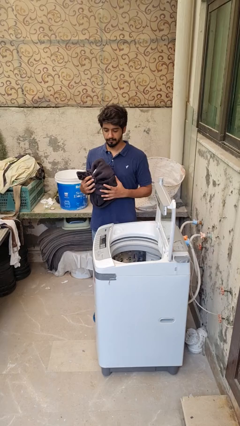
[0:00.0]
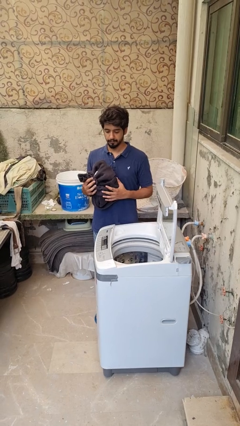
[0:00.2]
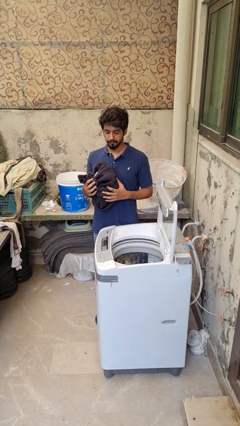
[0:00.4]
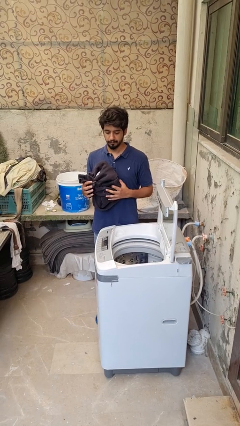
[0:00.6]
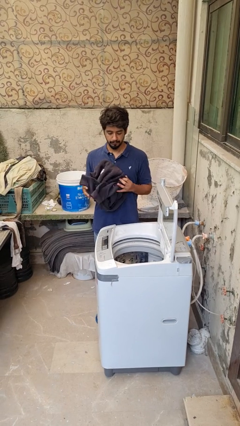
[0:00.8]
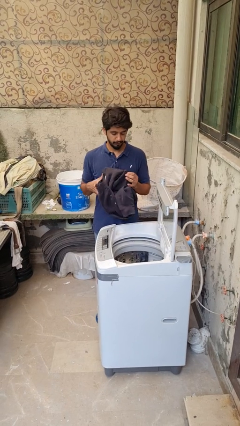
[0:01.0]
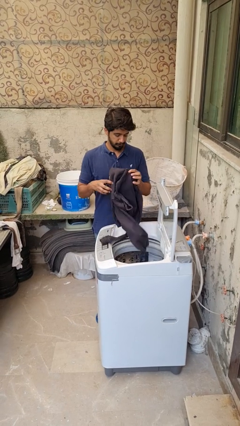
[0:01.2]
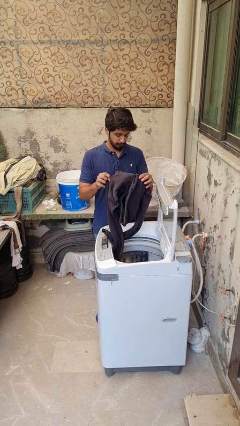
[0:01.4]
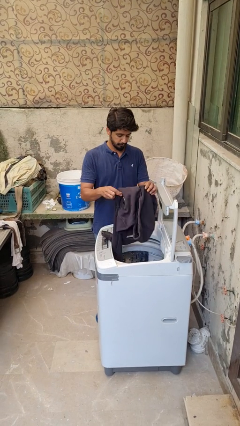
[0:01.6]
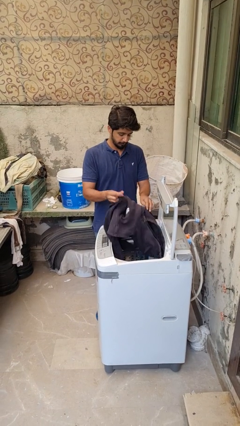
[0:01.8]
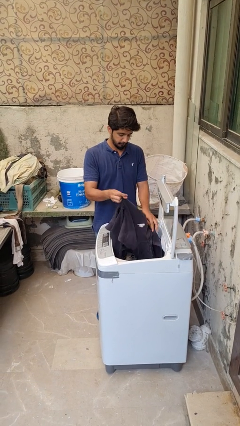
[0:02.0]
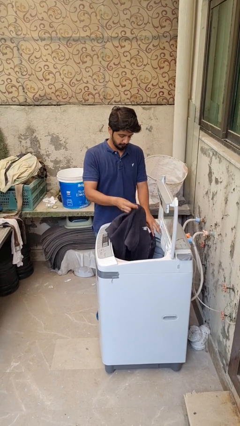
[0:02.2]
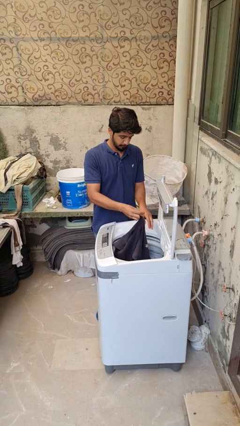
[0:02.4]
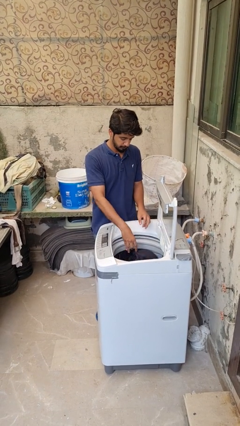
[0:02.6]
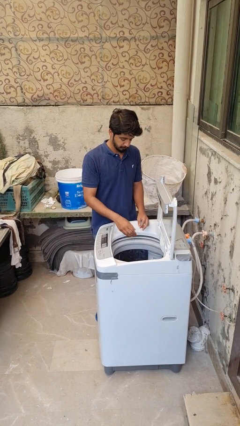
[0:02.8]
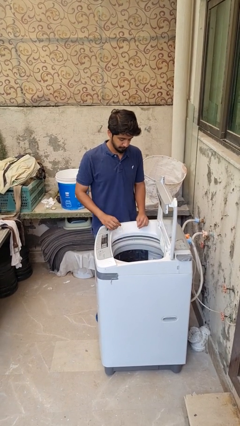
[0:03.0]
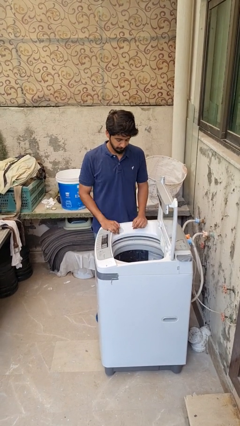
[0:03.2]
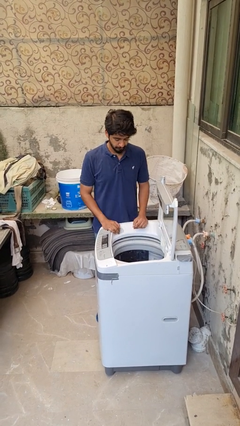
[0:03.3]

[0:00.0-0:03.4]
person loads clotheswasher

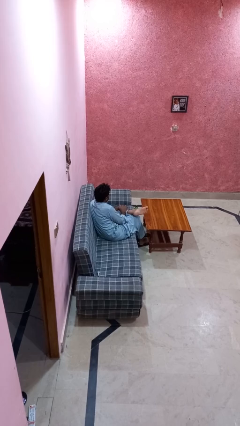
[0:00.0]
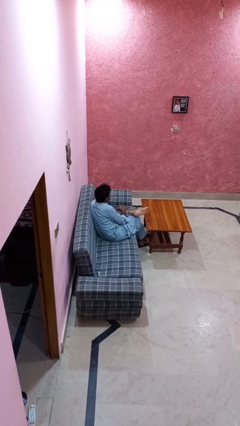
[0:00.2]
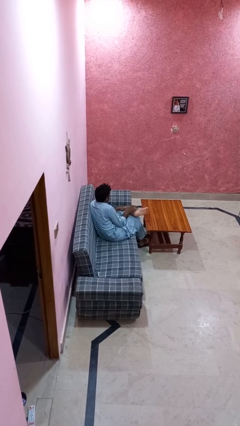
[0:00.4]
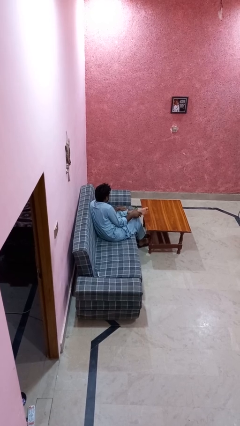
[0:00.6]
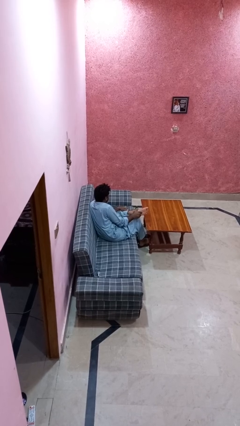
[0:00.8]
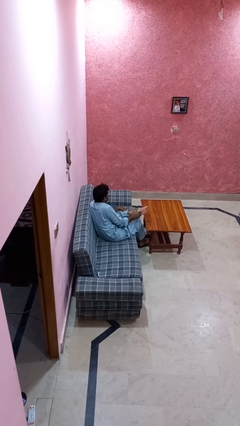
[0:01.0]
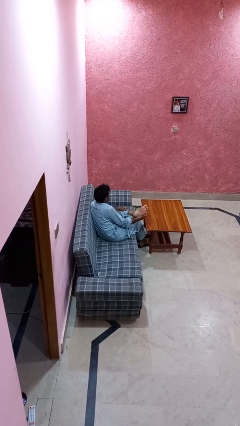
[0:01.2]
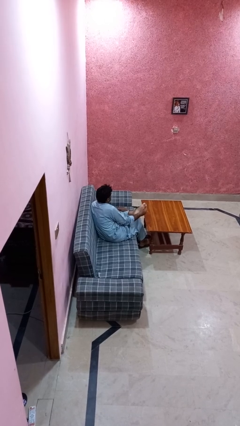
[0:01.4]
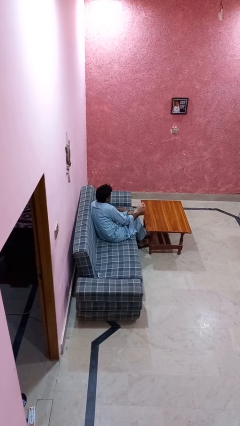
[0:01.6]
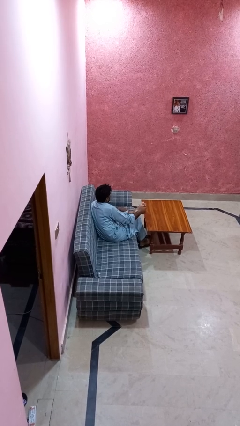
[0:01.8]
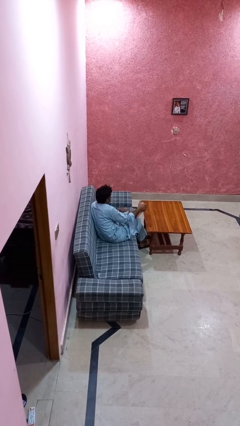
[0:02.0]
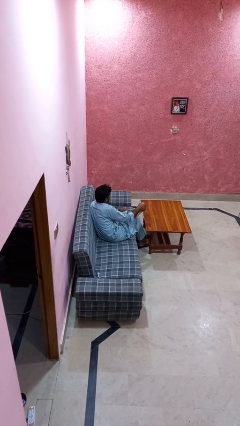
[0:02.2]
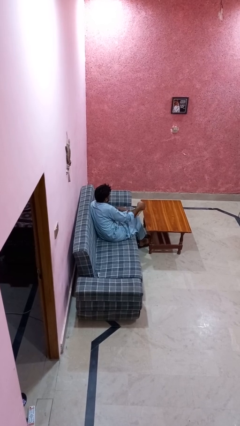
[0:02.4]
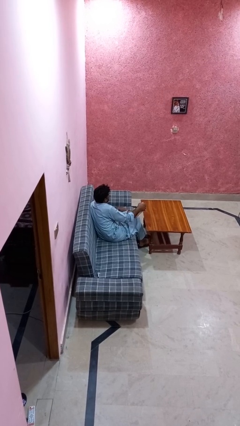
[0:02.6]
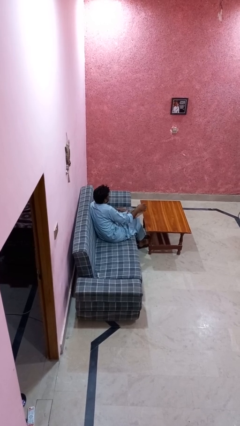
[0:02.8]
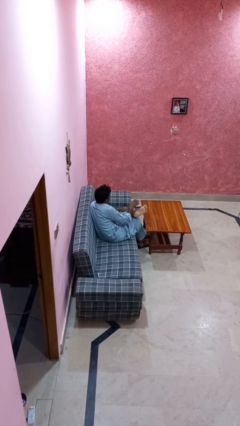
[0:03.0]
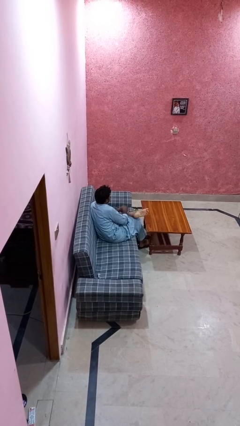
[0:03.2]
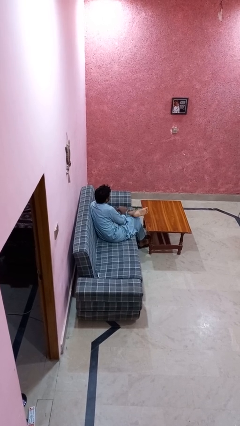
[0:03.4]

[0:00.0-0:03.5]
person rubs foot

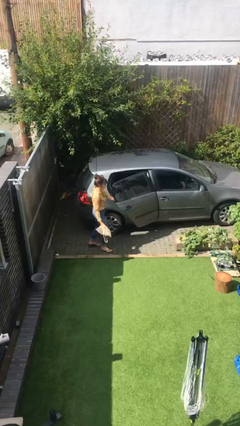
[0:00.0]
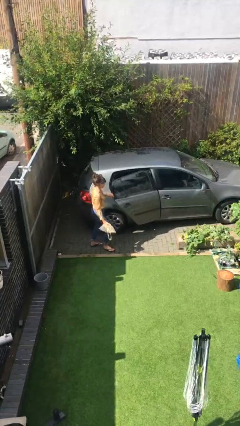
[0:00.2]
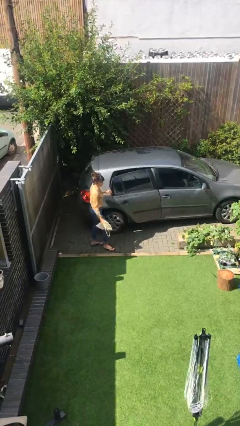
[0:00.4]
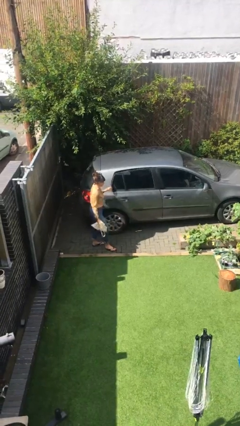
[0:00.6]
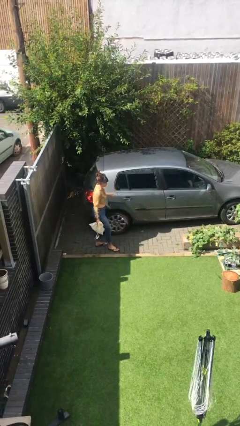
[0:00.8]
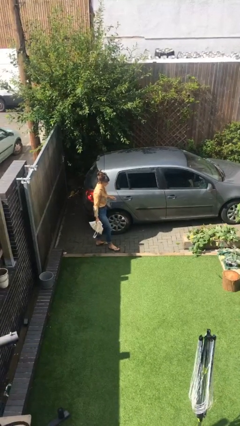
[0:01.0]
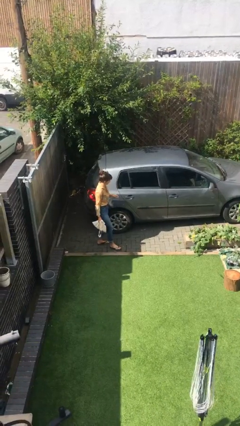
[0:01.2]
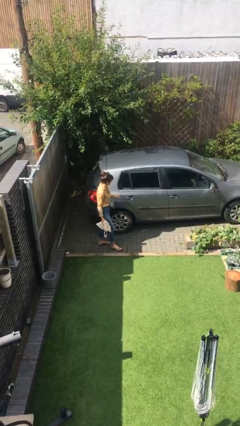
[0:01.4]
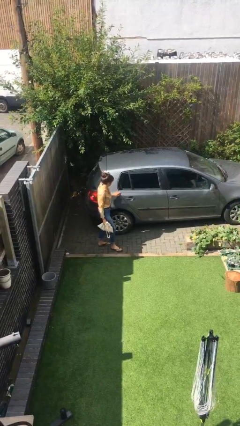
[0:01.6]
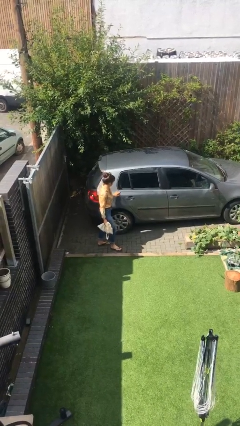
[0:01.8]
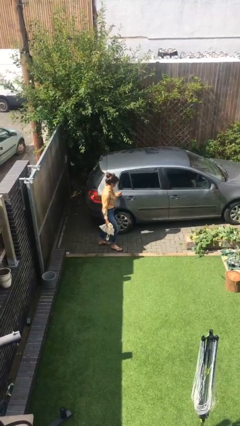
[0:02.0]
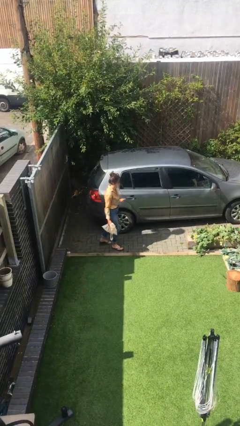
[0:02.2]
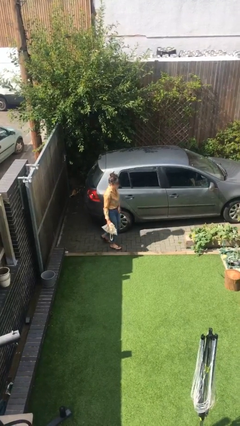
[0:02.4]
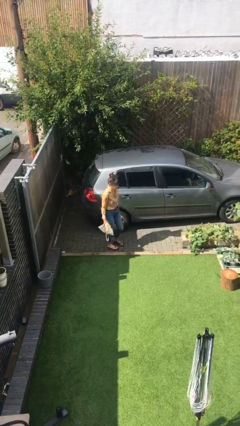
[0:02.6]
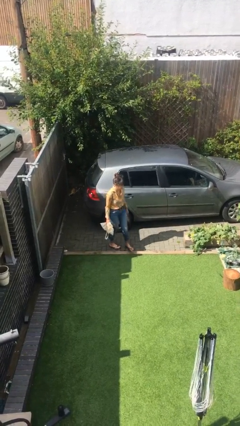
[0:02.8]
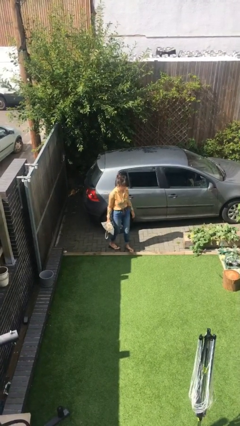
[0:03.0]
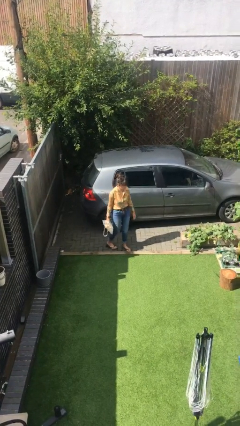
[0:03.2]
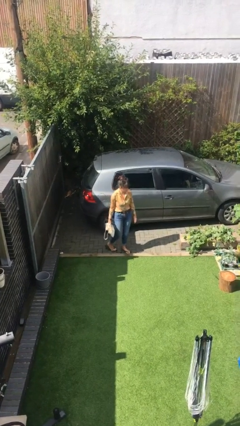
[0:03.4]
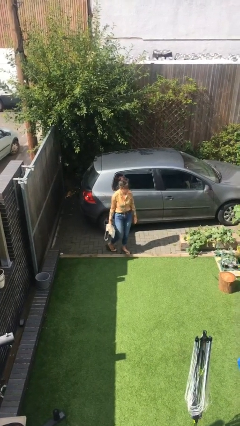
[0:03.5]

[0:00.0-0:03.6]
person closes car door

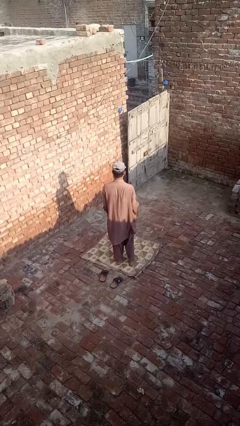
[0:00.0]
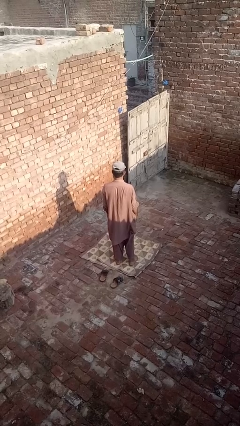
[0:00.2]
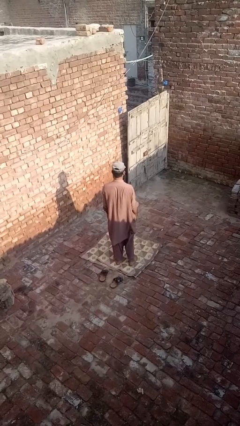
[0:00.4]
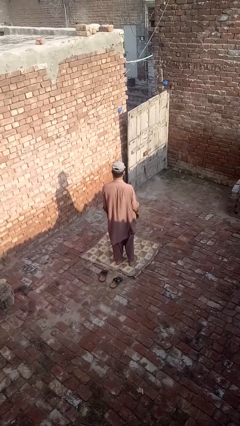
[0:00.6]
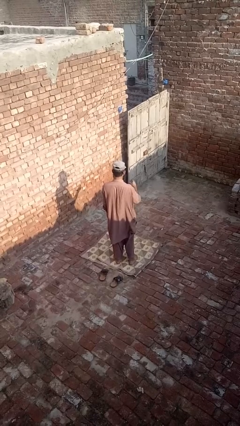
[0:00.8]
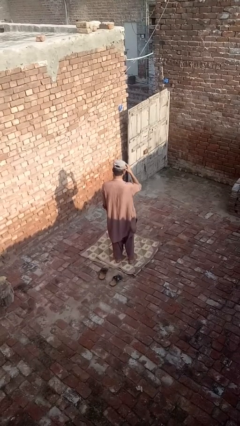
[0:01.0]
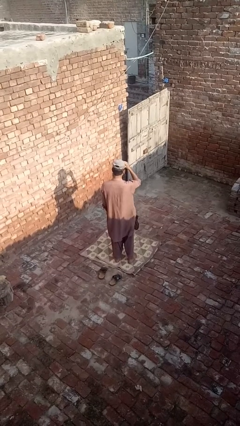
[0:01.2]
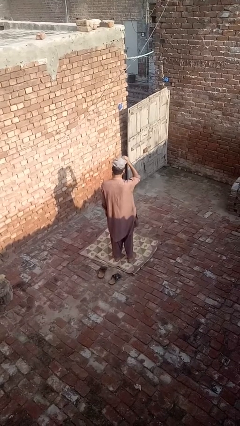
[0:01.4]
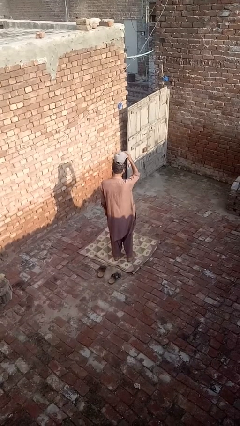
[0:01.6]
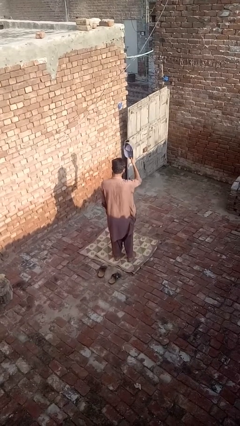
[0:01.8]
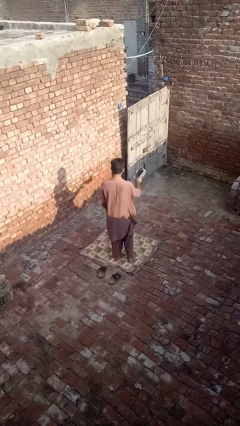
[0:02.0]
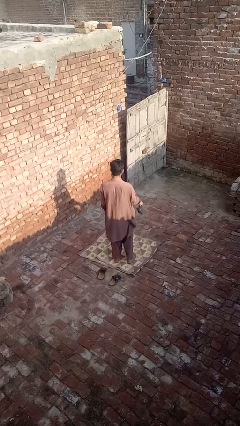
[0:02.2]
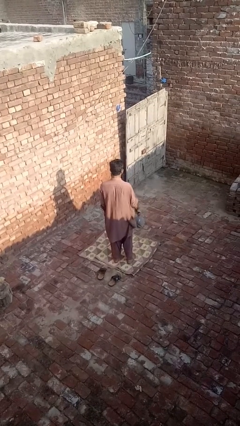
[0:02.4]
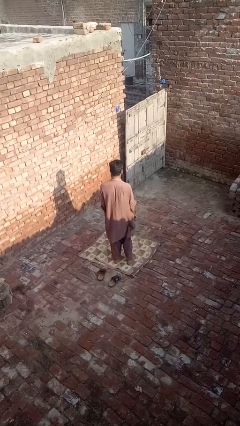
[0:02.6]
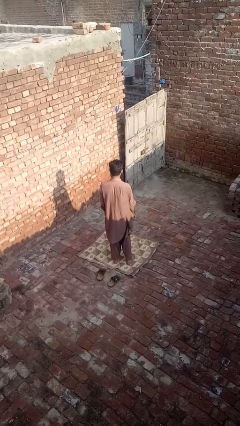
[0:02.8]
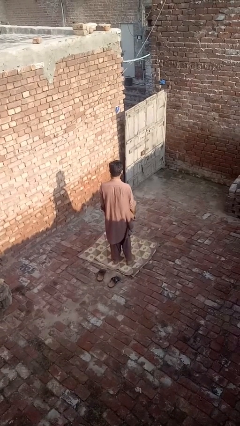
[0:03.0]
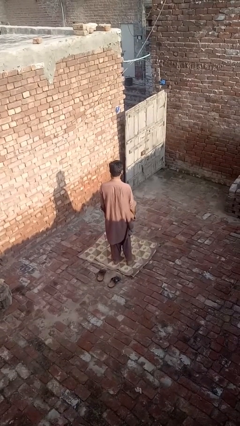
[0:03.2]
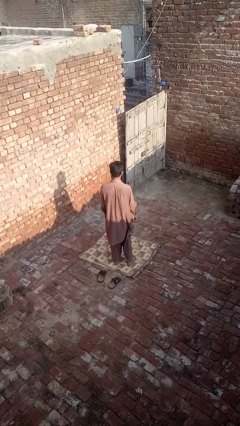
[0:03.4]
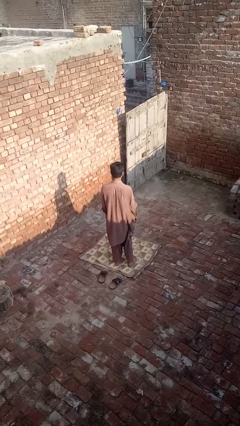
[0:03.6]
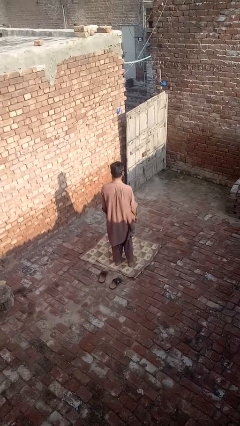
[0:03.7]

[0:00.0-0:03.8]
person takes off hat

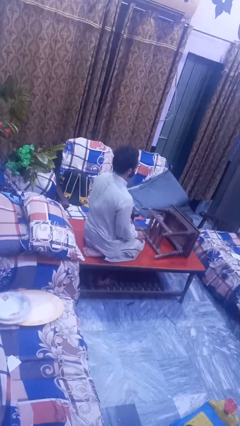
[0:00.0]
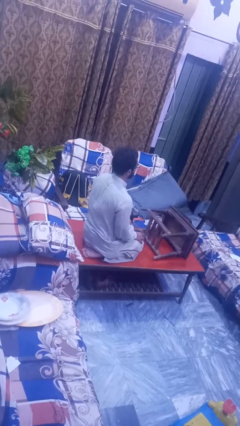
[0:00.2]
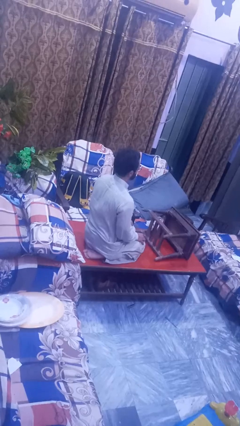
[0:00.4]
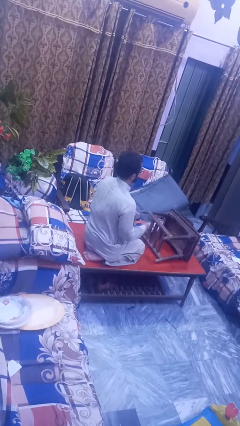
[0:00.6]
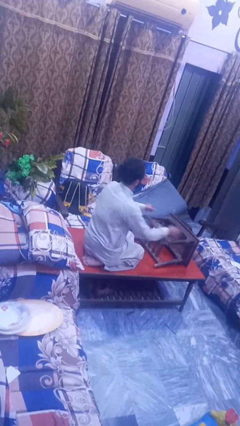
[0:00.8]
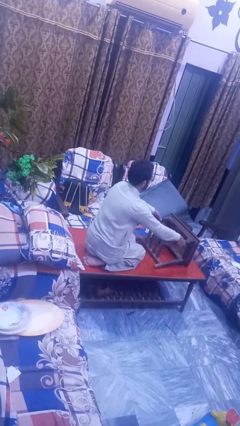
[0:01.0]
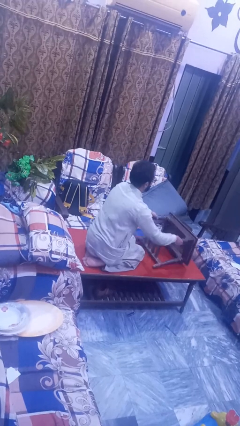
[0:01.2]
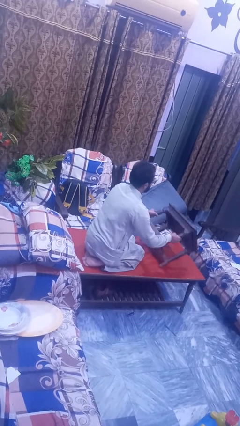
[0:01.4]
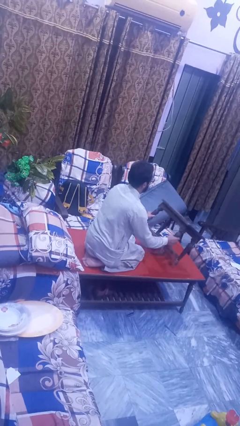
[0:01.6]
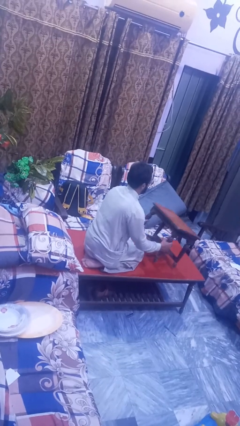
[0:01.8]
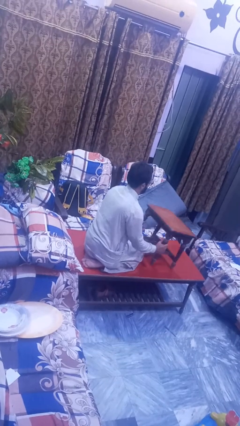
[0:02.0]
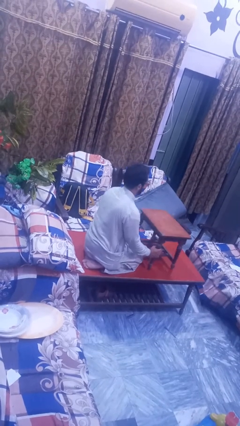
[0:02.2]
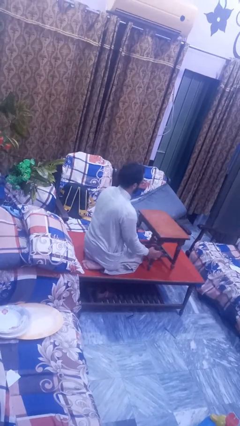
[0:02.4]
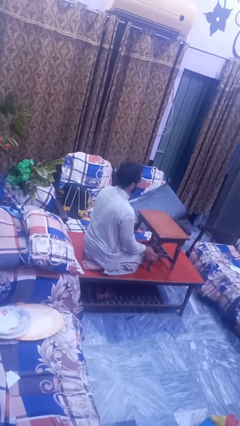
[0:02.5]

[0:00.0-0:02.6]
person sets upright furniture

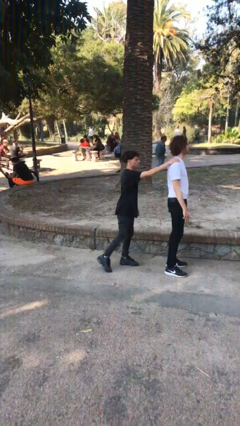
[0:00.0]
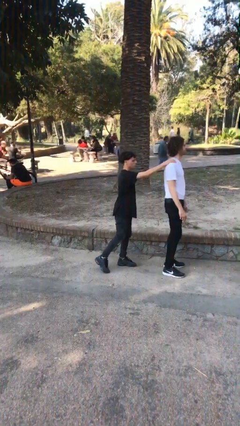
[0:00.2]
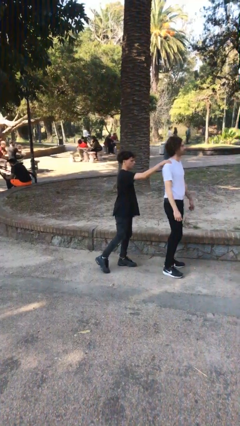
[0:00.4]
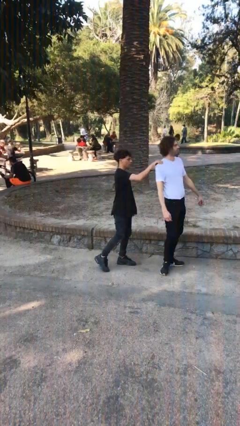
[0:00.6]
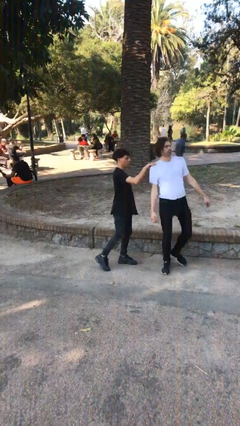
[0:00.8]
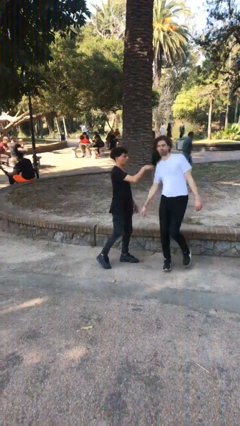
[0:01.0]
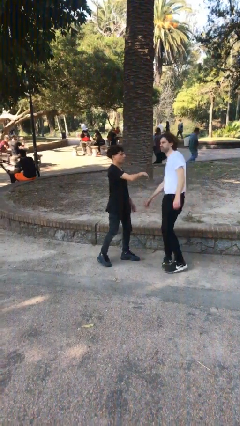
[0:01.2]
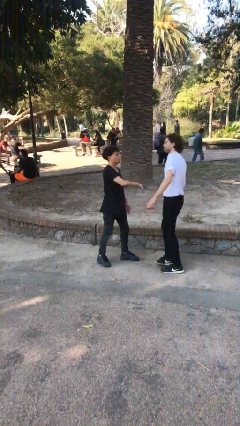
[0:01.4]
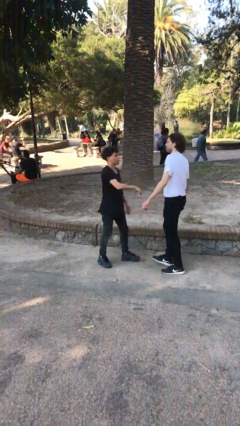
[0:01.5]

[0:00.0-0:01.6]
person spins person around
